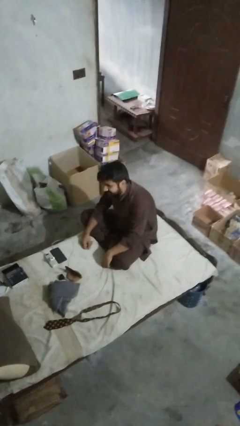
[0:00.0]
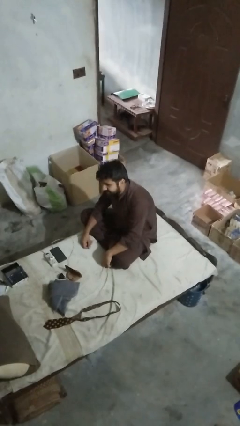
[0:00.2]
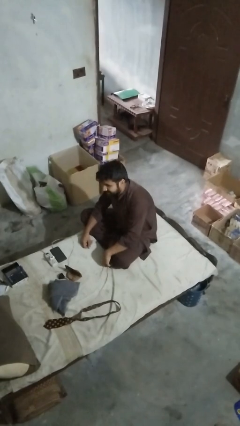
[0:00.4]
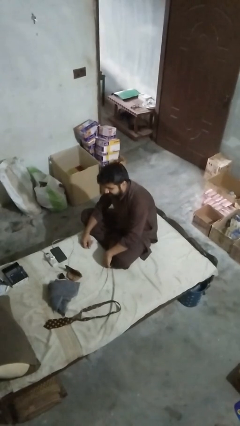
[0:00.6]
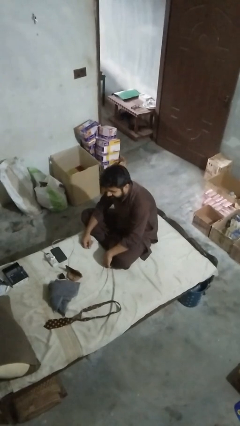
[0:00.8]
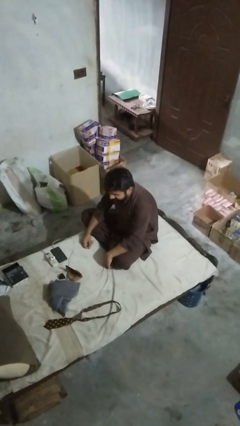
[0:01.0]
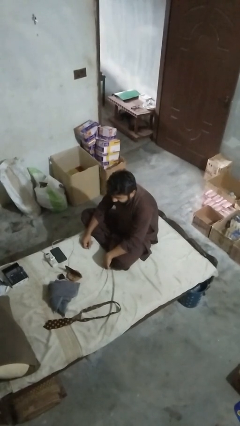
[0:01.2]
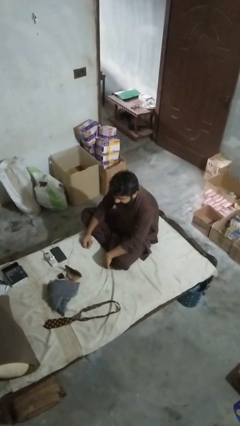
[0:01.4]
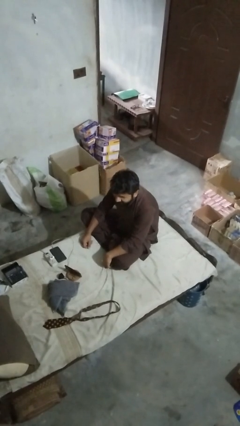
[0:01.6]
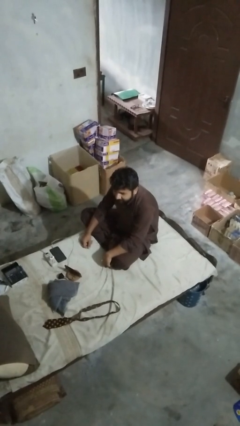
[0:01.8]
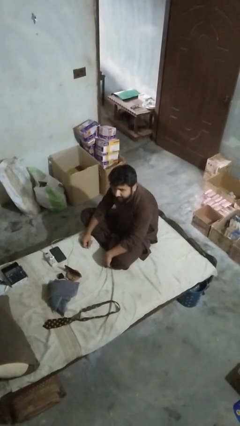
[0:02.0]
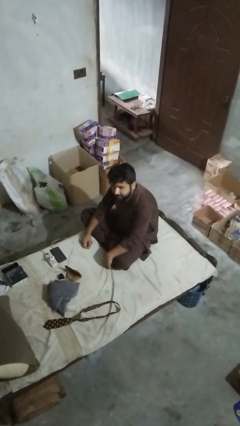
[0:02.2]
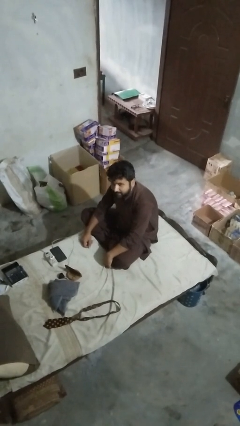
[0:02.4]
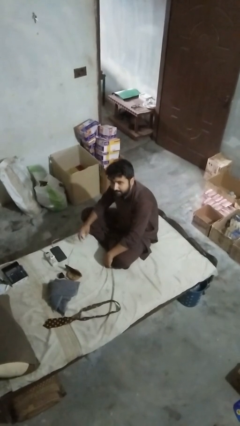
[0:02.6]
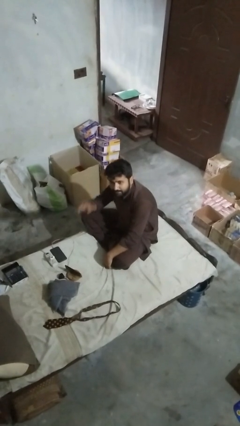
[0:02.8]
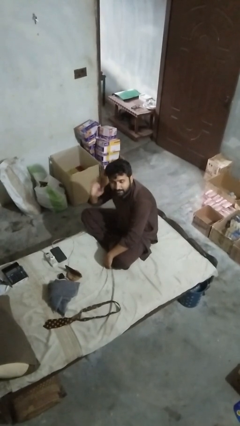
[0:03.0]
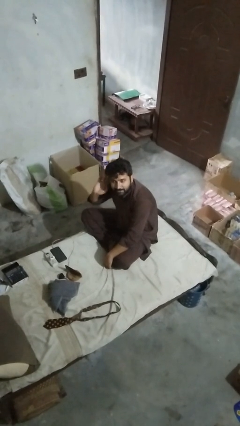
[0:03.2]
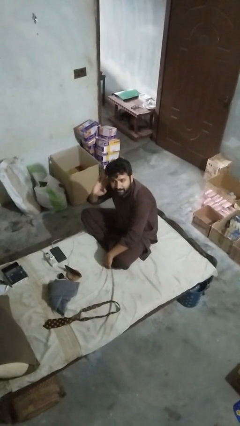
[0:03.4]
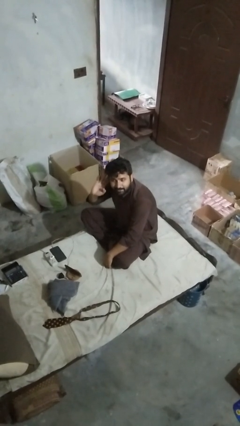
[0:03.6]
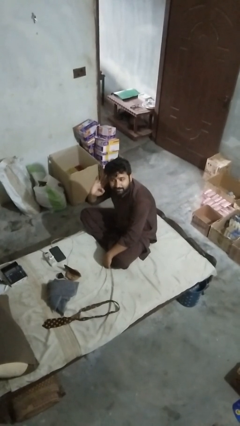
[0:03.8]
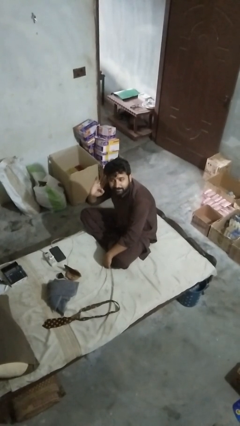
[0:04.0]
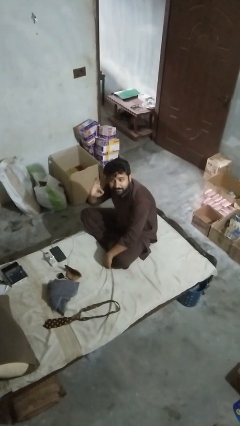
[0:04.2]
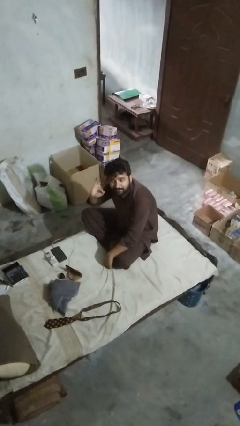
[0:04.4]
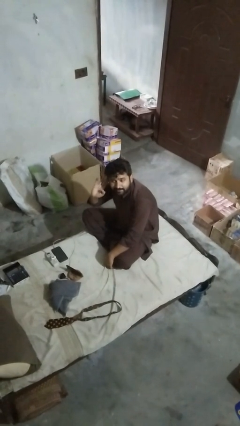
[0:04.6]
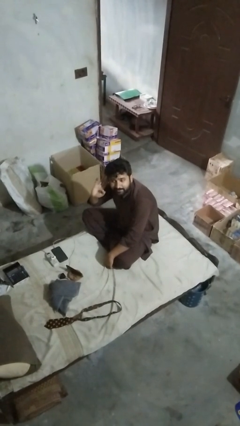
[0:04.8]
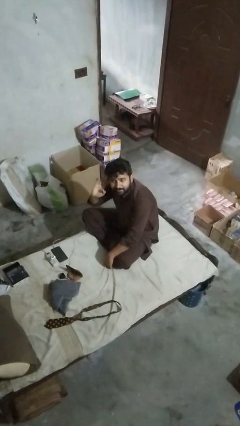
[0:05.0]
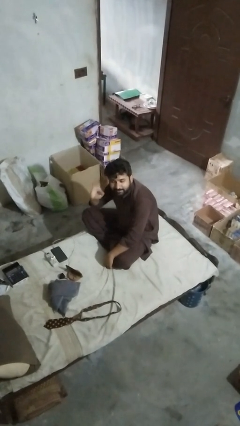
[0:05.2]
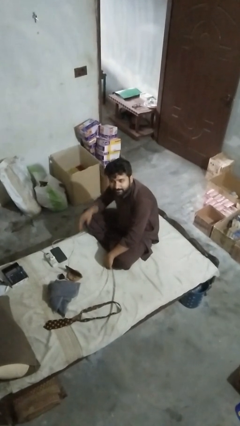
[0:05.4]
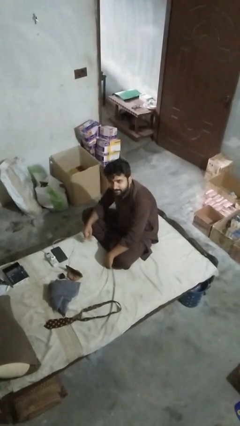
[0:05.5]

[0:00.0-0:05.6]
person gestures listen closely

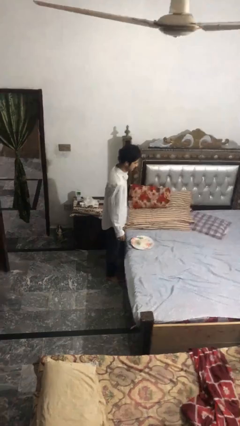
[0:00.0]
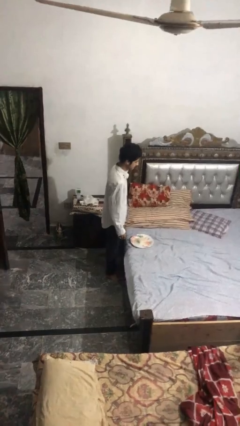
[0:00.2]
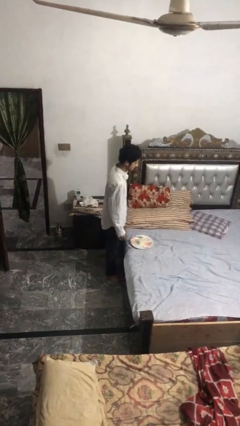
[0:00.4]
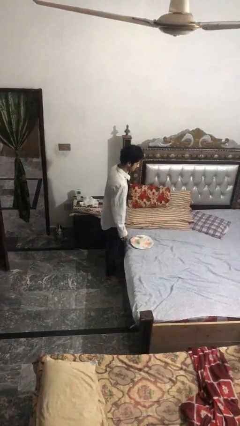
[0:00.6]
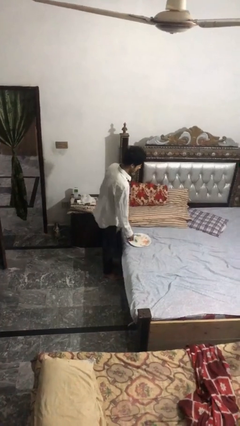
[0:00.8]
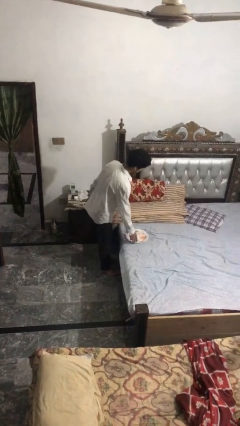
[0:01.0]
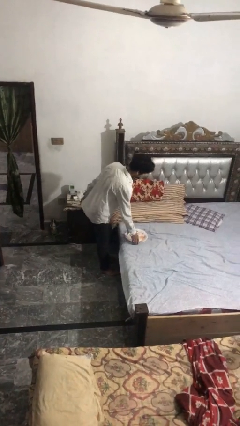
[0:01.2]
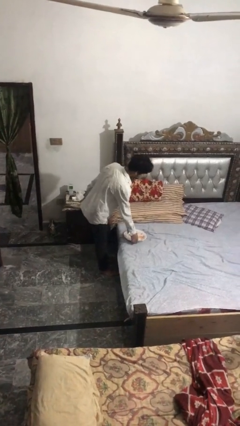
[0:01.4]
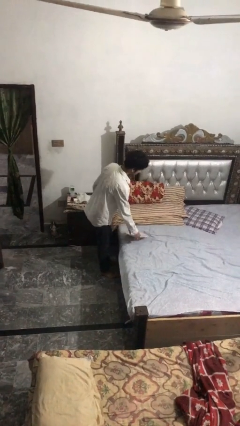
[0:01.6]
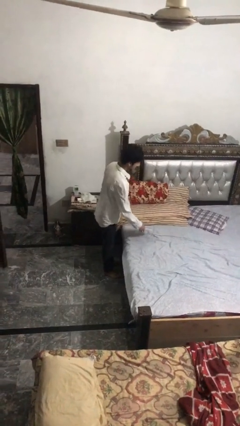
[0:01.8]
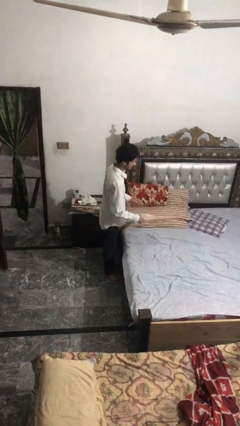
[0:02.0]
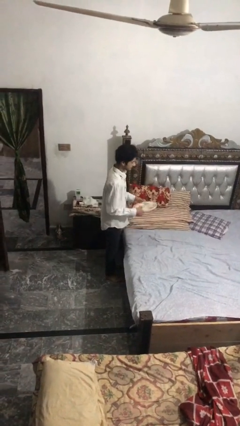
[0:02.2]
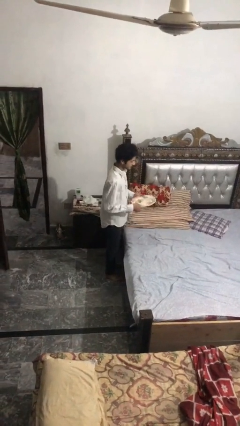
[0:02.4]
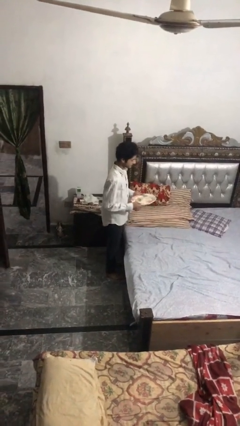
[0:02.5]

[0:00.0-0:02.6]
person picks up object from bed

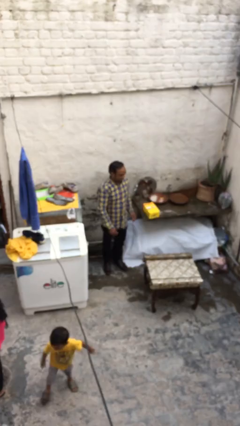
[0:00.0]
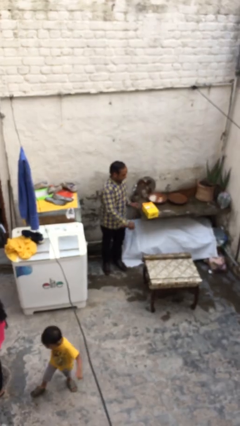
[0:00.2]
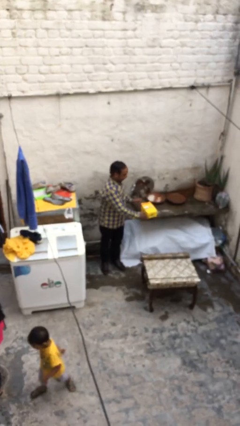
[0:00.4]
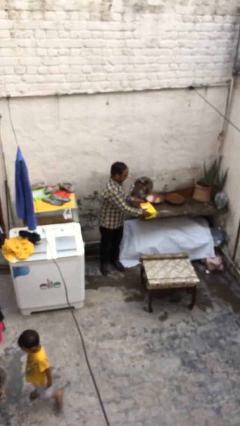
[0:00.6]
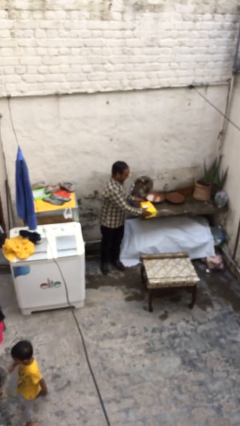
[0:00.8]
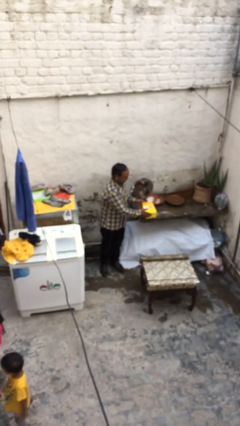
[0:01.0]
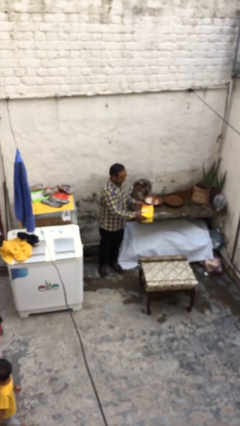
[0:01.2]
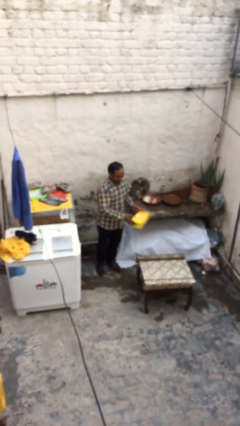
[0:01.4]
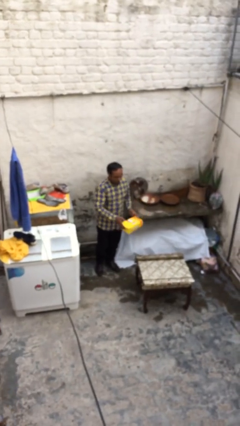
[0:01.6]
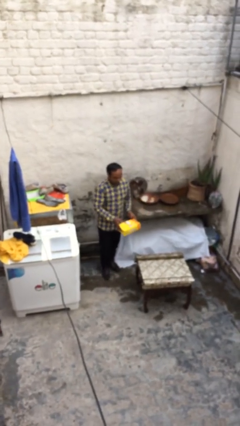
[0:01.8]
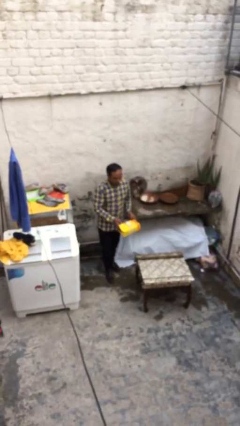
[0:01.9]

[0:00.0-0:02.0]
person picks up object from table

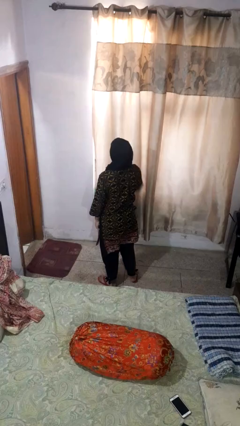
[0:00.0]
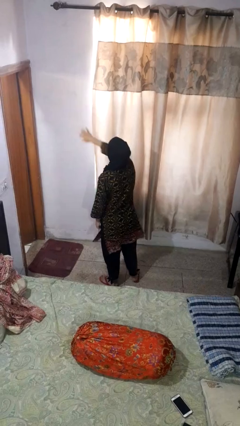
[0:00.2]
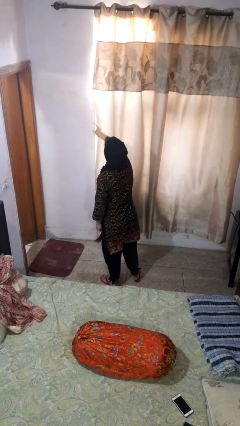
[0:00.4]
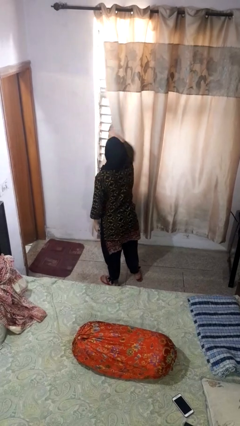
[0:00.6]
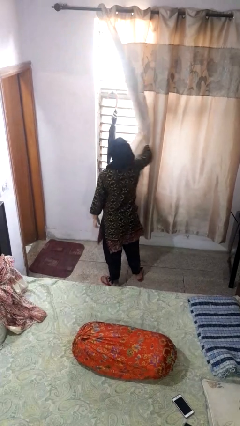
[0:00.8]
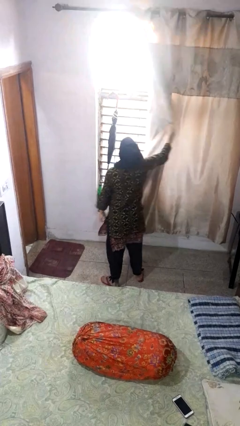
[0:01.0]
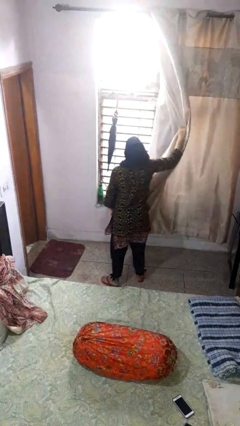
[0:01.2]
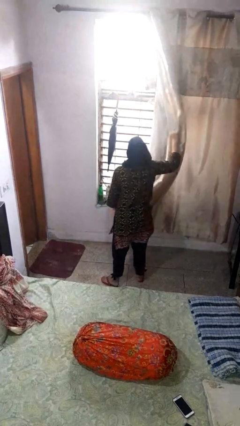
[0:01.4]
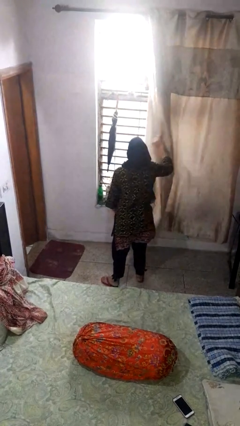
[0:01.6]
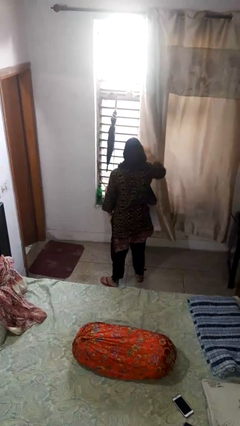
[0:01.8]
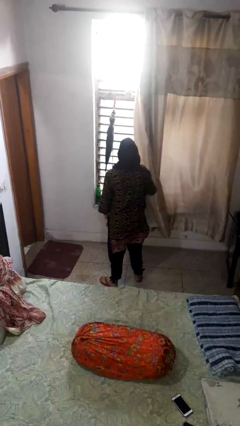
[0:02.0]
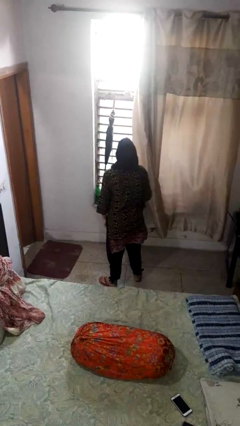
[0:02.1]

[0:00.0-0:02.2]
person opens curtains

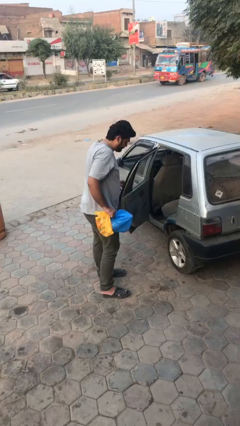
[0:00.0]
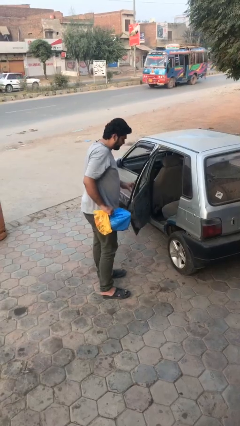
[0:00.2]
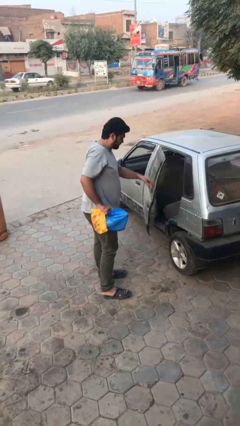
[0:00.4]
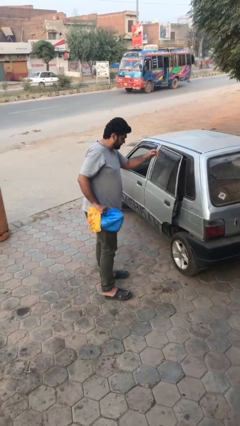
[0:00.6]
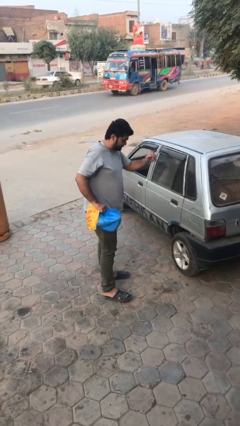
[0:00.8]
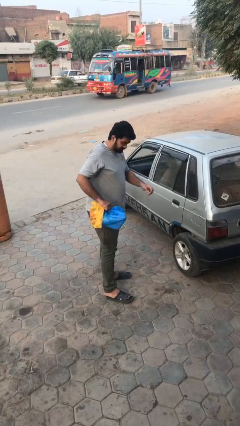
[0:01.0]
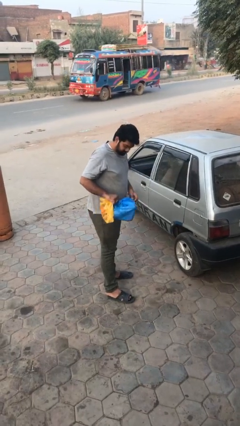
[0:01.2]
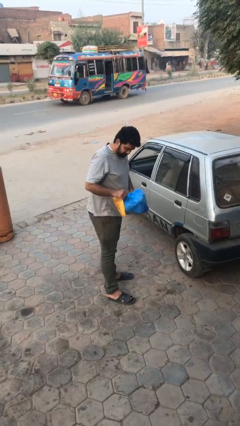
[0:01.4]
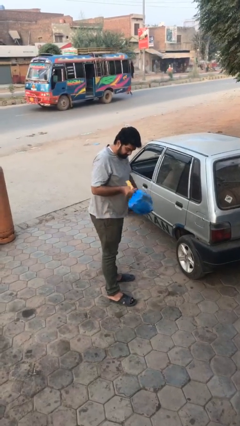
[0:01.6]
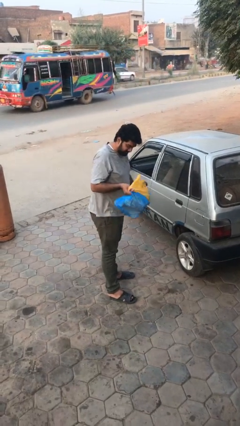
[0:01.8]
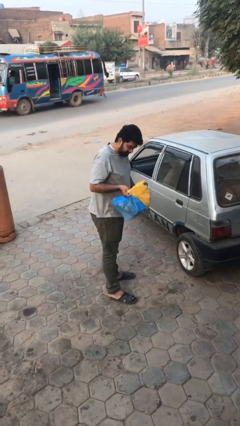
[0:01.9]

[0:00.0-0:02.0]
person closes car door

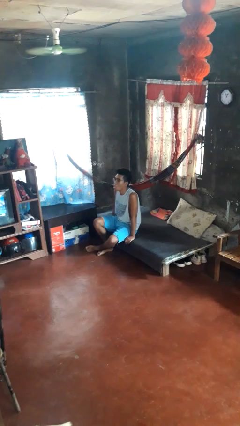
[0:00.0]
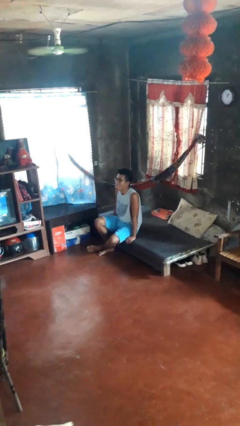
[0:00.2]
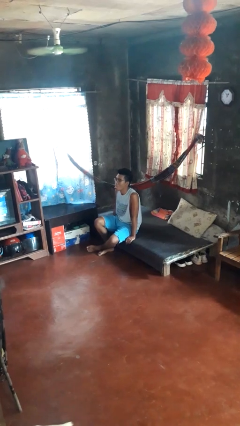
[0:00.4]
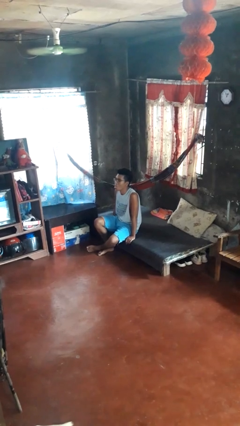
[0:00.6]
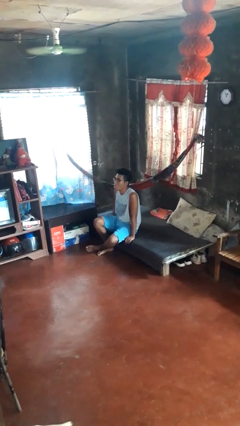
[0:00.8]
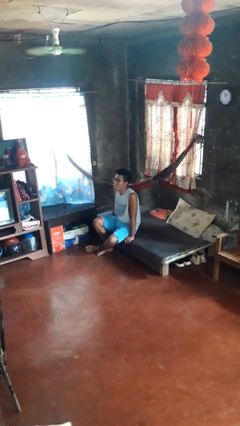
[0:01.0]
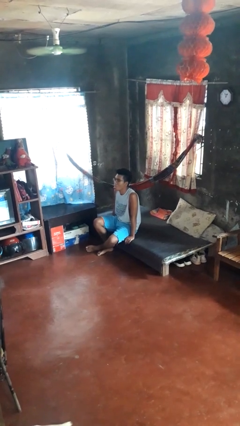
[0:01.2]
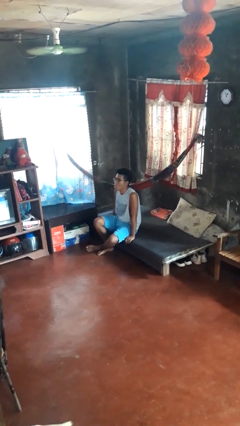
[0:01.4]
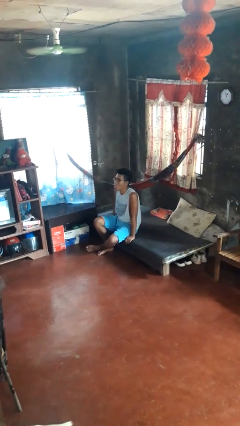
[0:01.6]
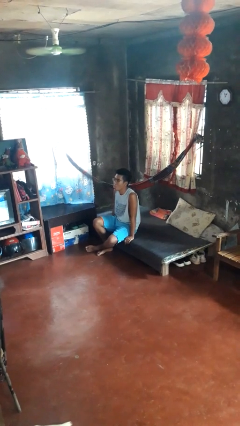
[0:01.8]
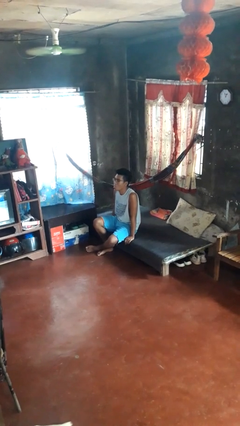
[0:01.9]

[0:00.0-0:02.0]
person sticks out tongue

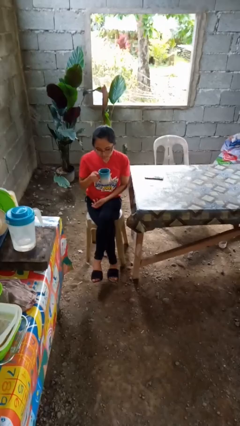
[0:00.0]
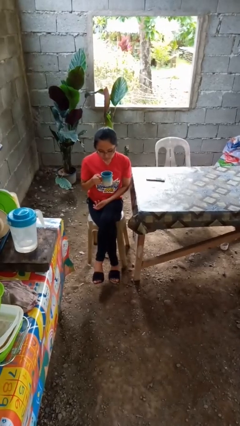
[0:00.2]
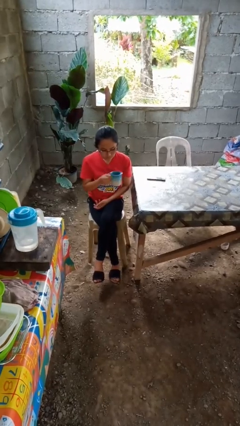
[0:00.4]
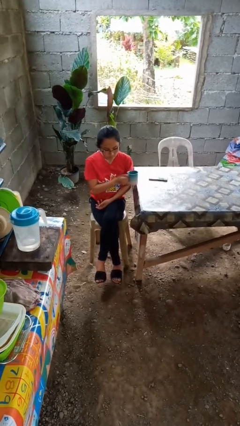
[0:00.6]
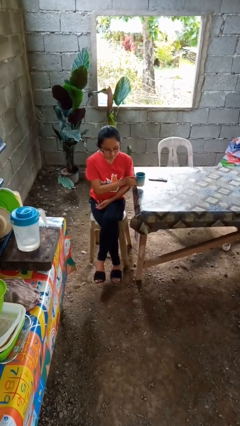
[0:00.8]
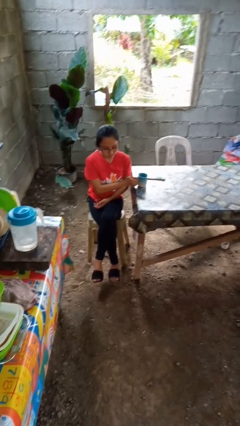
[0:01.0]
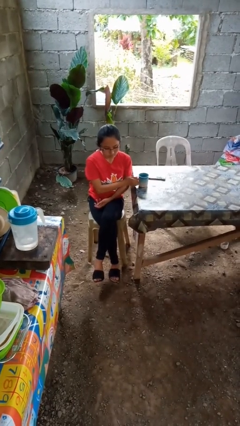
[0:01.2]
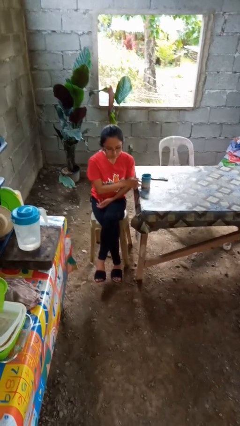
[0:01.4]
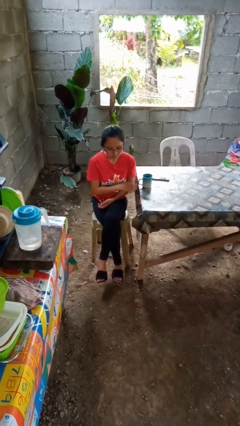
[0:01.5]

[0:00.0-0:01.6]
person puts down object on table
